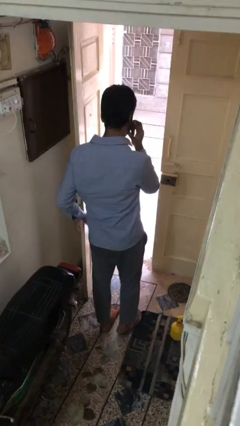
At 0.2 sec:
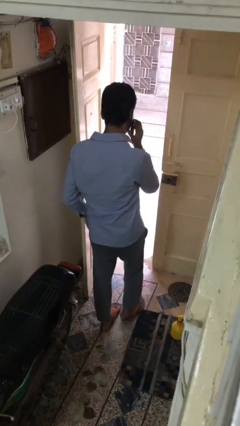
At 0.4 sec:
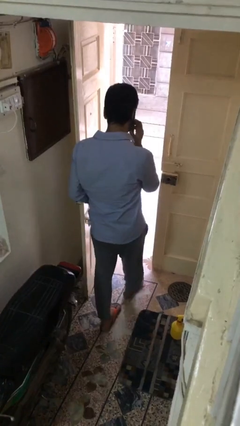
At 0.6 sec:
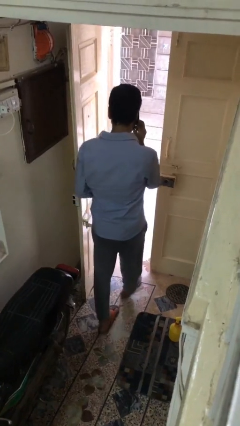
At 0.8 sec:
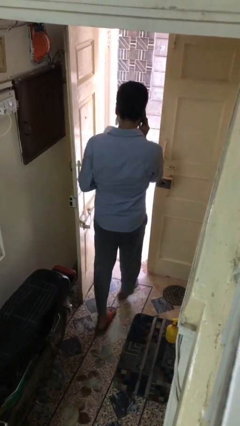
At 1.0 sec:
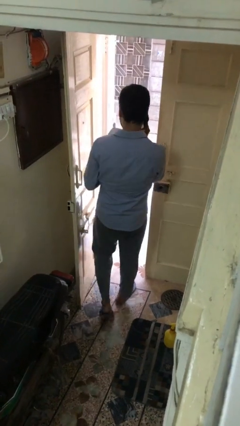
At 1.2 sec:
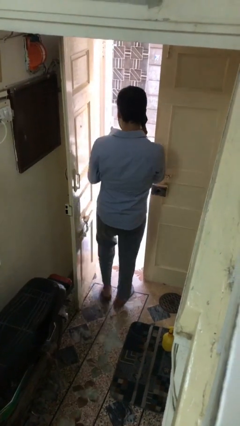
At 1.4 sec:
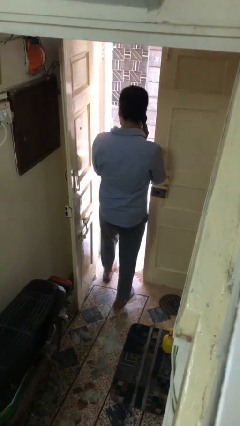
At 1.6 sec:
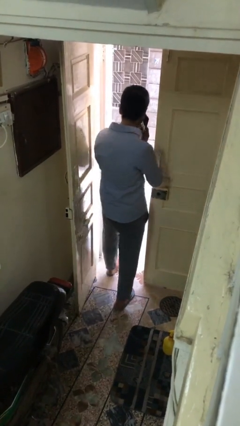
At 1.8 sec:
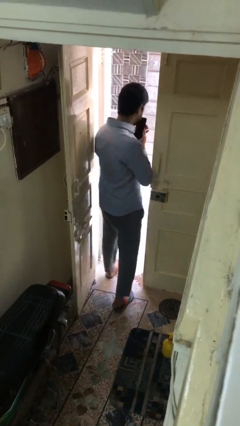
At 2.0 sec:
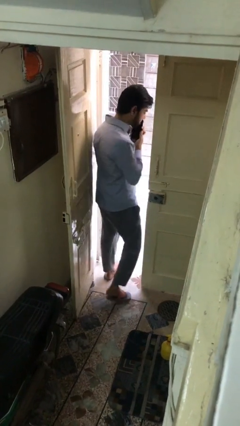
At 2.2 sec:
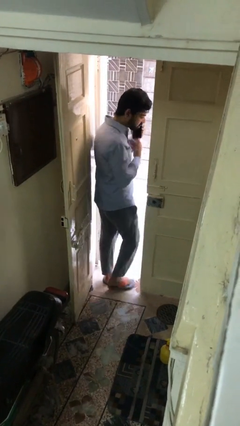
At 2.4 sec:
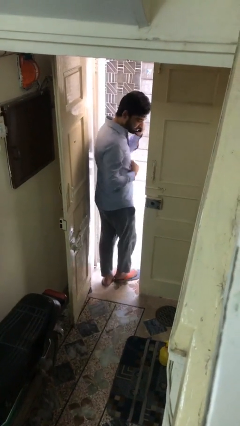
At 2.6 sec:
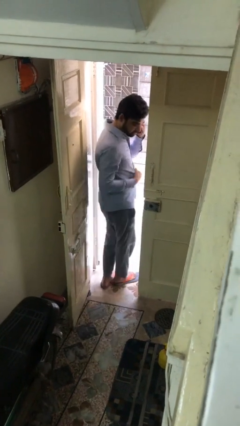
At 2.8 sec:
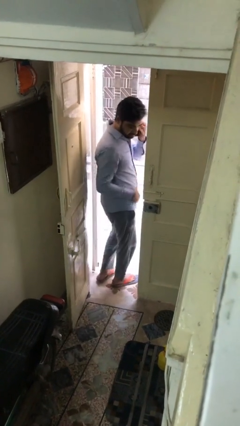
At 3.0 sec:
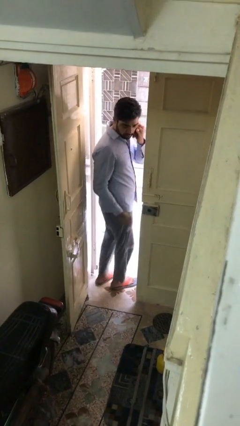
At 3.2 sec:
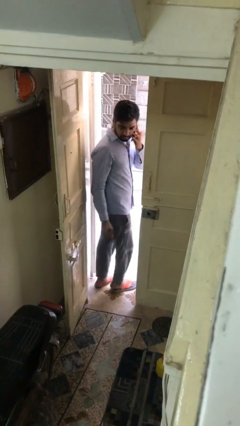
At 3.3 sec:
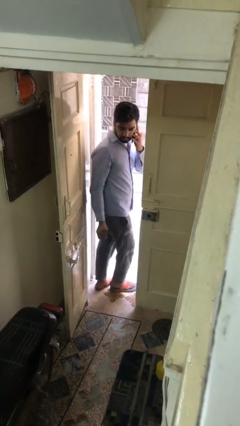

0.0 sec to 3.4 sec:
person exits scene through structure

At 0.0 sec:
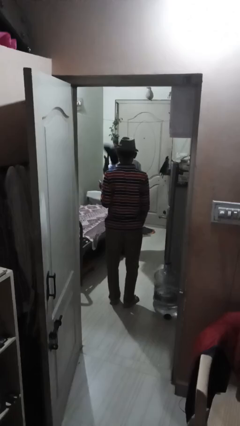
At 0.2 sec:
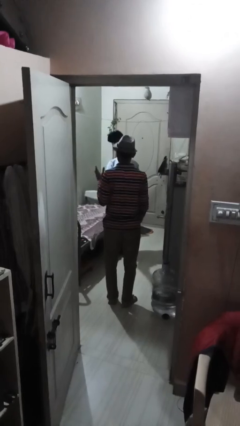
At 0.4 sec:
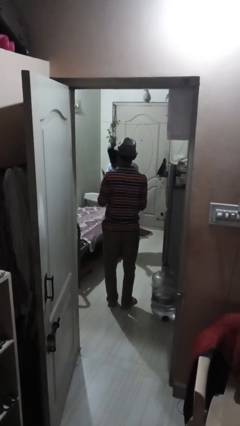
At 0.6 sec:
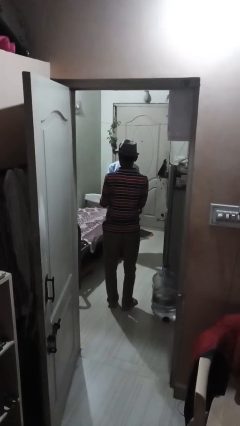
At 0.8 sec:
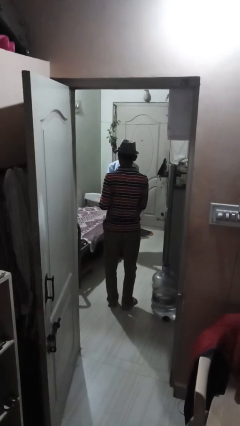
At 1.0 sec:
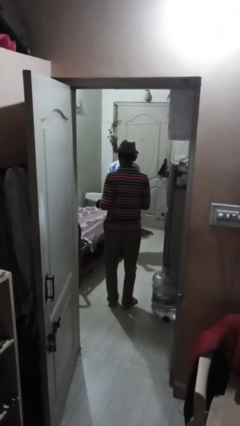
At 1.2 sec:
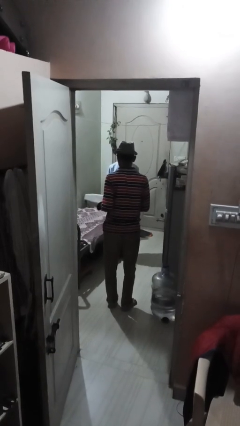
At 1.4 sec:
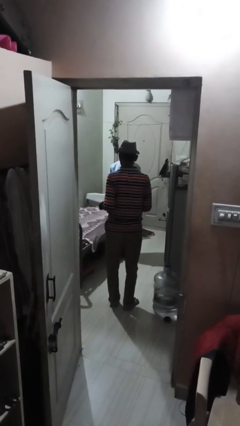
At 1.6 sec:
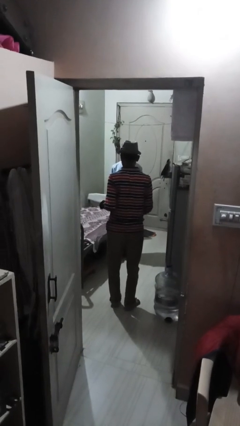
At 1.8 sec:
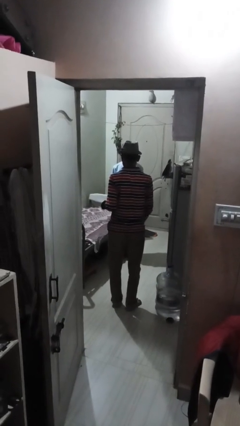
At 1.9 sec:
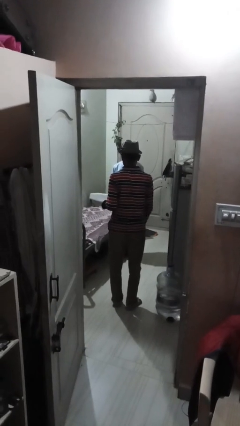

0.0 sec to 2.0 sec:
person catches object from person

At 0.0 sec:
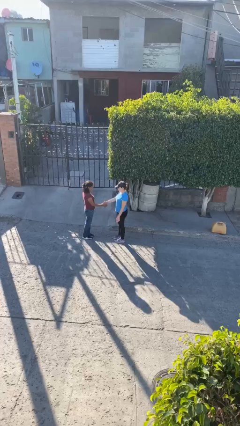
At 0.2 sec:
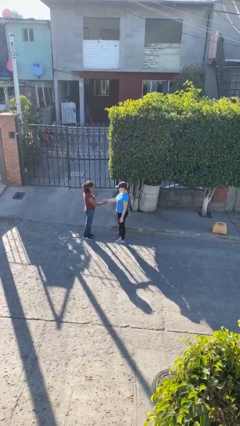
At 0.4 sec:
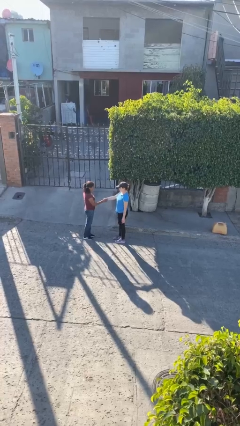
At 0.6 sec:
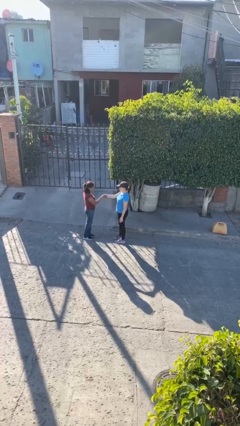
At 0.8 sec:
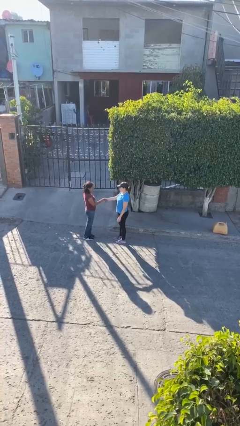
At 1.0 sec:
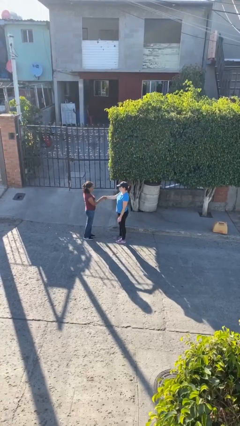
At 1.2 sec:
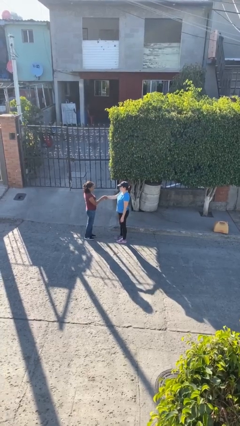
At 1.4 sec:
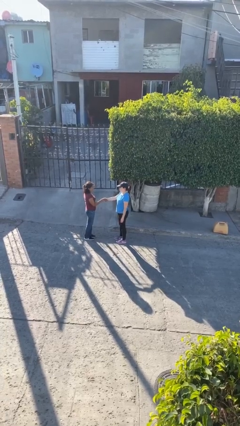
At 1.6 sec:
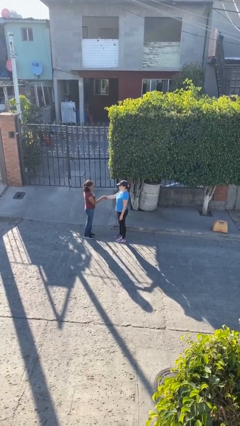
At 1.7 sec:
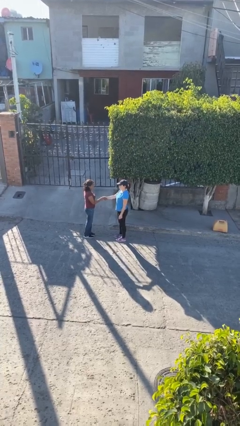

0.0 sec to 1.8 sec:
person shakes hand

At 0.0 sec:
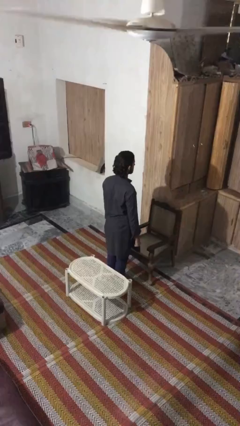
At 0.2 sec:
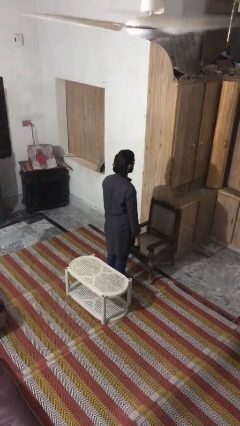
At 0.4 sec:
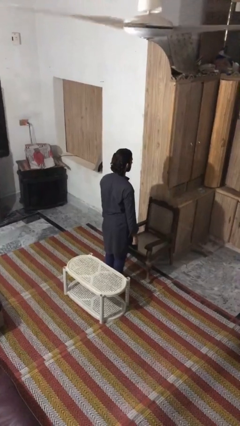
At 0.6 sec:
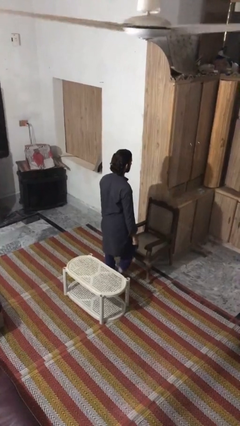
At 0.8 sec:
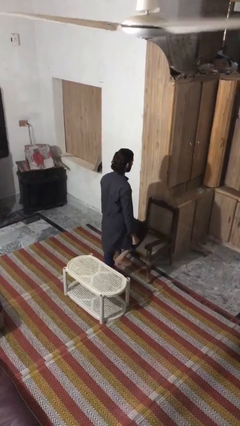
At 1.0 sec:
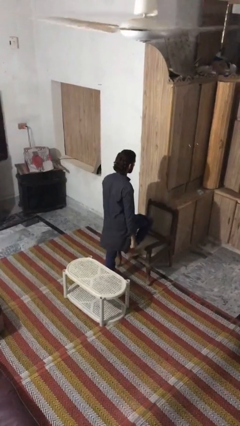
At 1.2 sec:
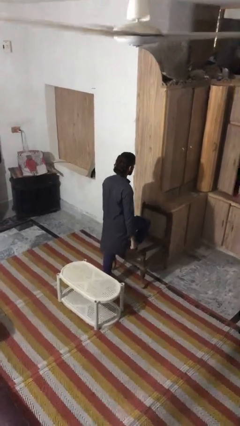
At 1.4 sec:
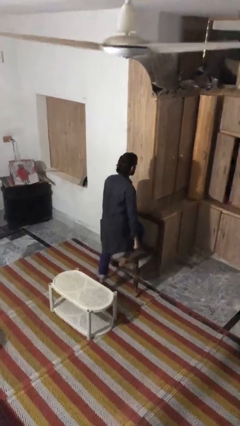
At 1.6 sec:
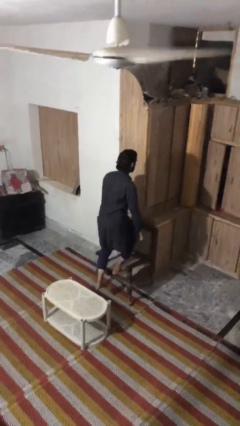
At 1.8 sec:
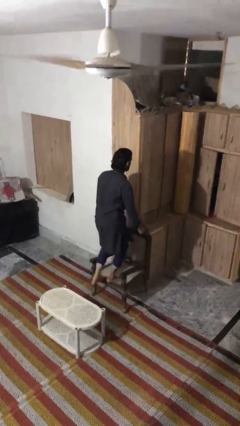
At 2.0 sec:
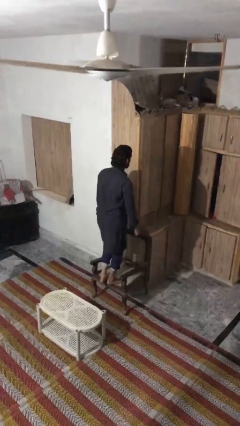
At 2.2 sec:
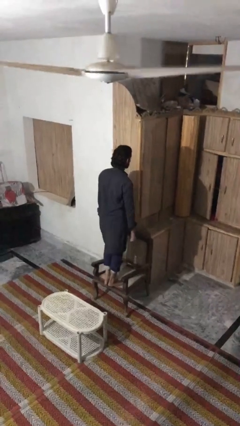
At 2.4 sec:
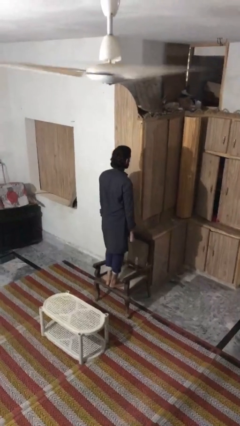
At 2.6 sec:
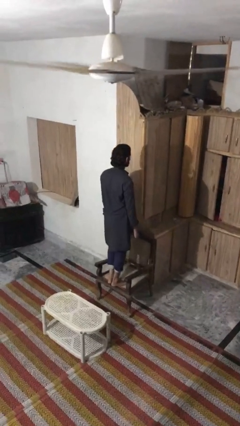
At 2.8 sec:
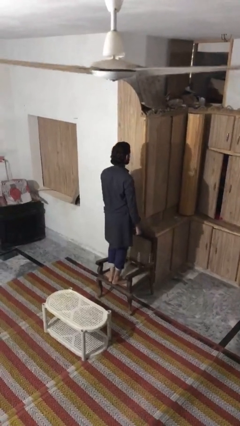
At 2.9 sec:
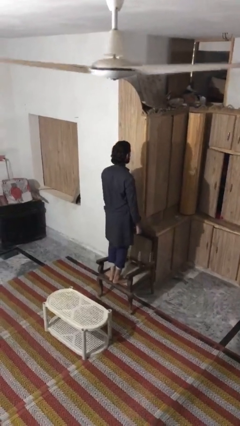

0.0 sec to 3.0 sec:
person climbs on chair

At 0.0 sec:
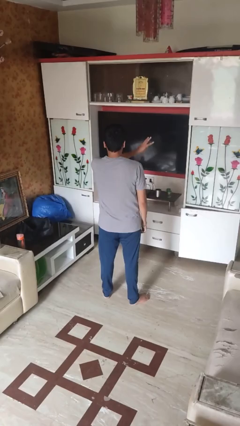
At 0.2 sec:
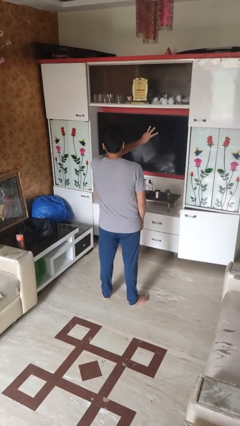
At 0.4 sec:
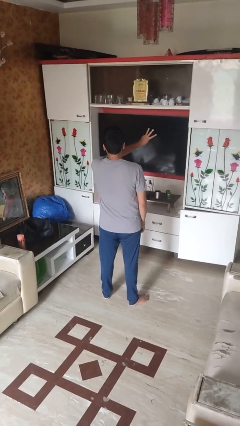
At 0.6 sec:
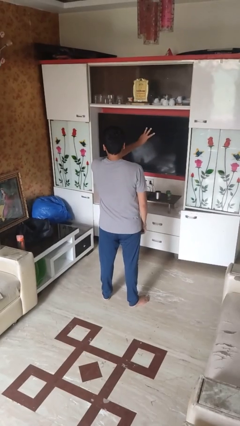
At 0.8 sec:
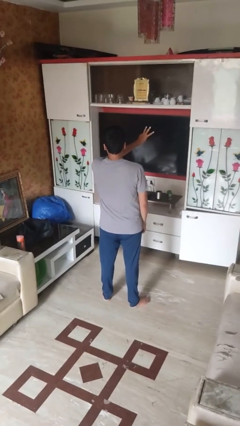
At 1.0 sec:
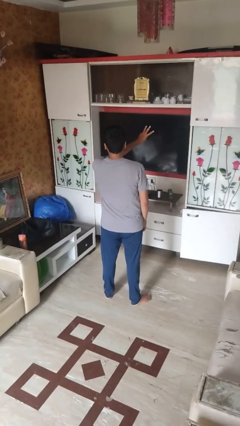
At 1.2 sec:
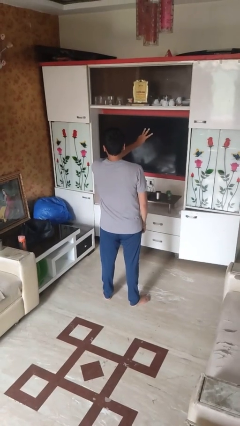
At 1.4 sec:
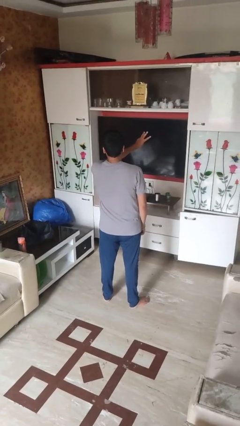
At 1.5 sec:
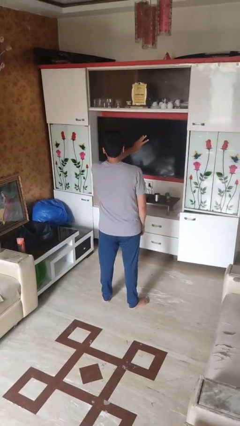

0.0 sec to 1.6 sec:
person gestures number three

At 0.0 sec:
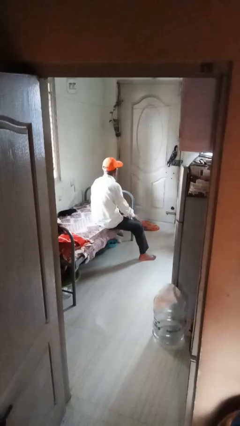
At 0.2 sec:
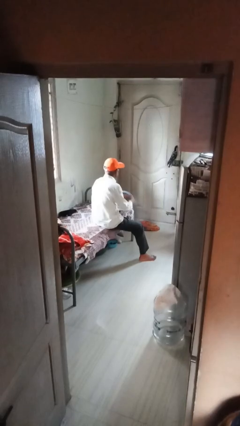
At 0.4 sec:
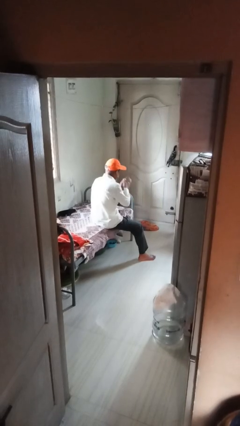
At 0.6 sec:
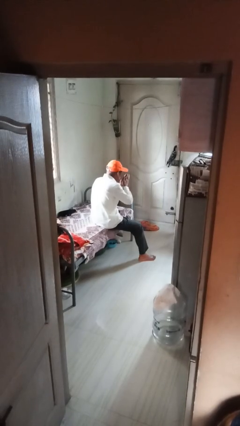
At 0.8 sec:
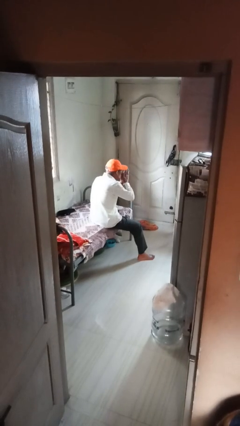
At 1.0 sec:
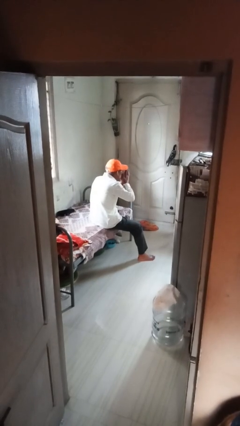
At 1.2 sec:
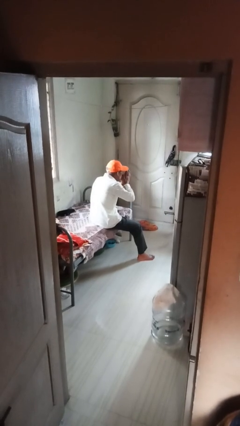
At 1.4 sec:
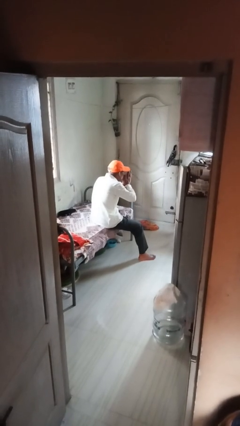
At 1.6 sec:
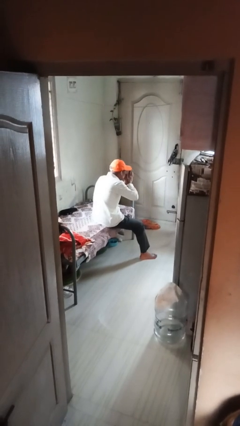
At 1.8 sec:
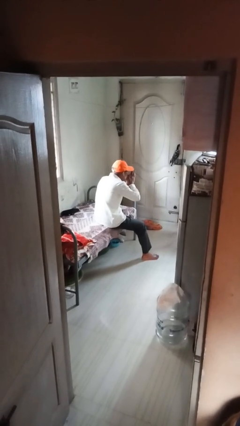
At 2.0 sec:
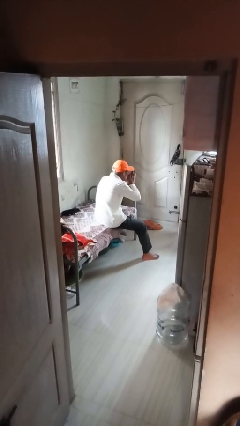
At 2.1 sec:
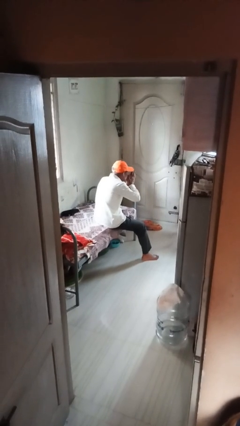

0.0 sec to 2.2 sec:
person prays

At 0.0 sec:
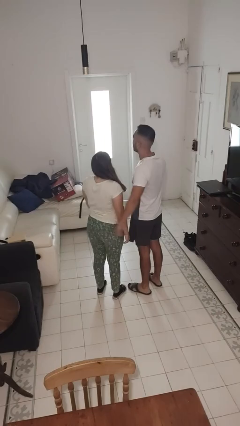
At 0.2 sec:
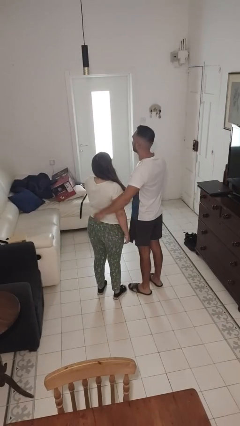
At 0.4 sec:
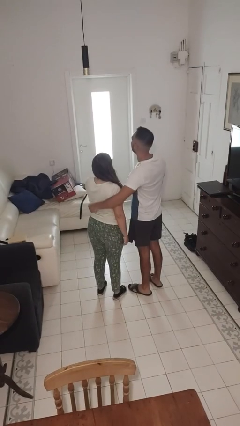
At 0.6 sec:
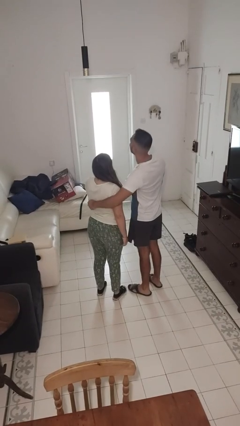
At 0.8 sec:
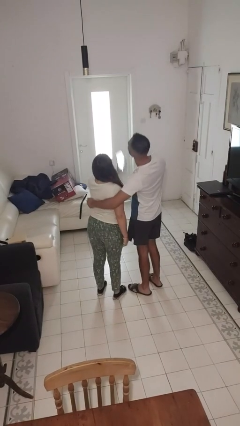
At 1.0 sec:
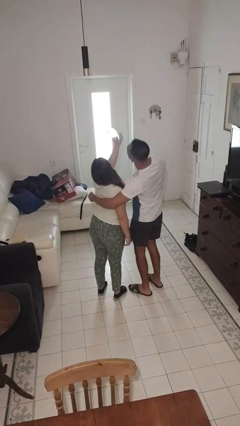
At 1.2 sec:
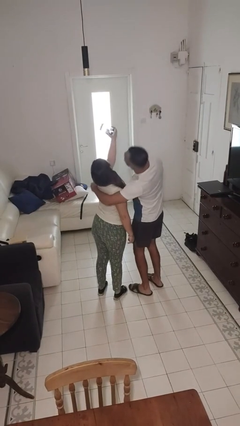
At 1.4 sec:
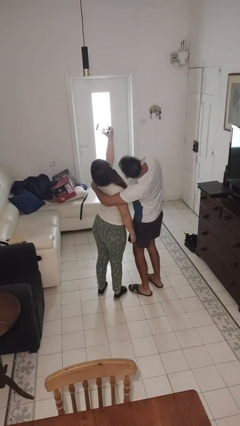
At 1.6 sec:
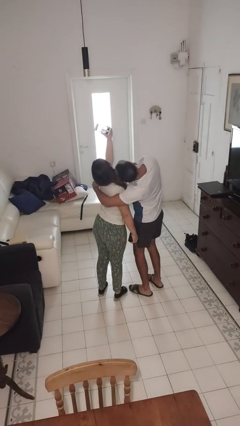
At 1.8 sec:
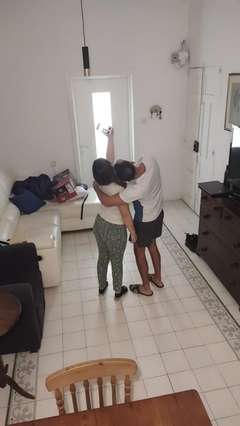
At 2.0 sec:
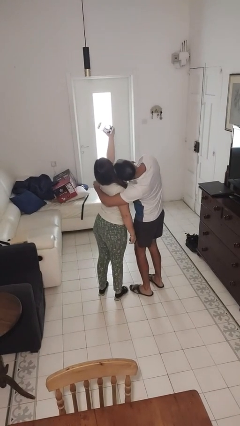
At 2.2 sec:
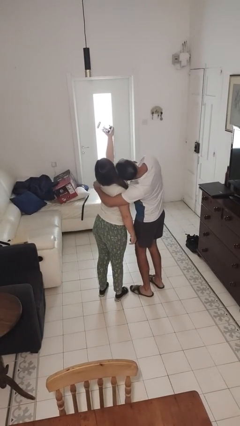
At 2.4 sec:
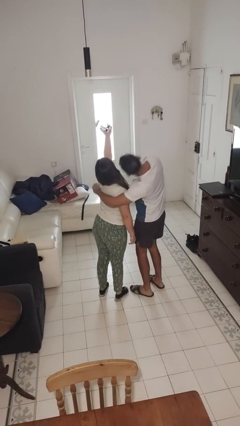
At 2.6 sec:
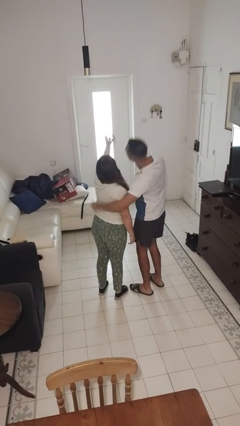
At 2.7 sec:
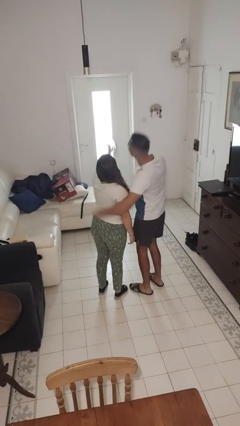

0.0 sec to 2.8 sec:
person takes selfie with person

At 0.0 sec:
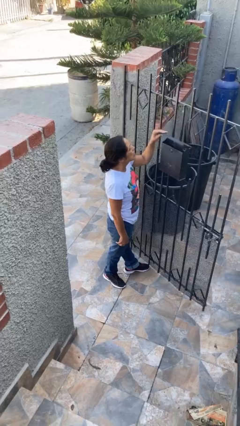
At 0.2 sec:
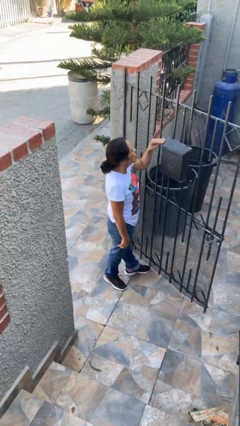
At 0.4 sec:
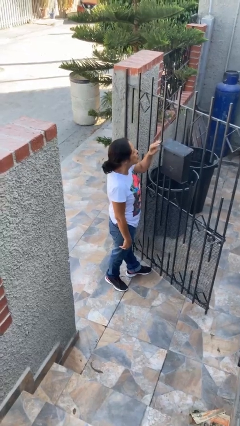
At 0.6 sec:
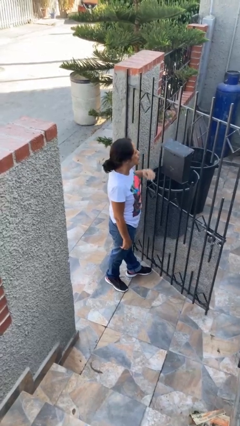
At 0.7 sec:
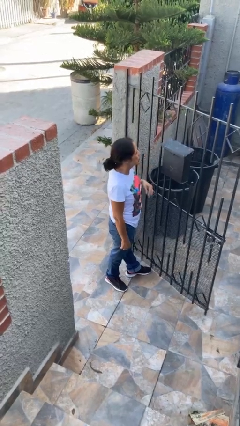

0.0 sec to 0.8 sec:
person closes mailbox
